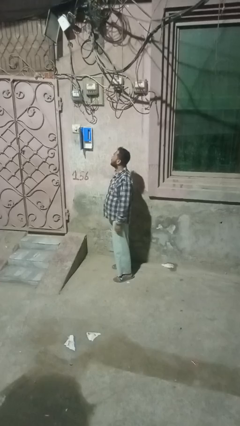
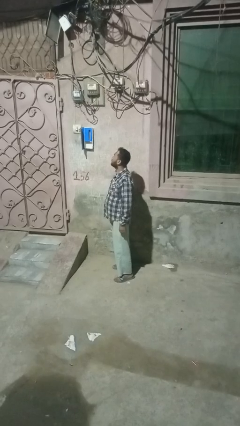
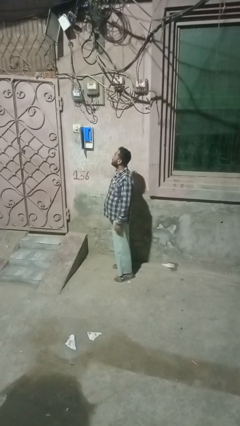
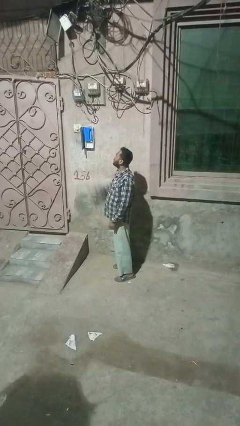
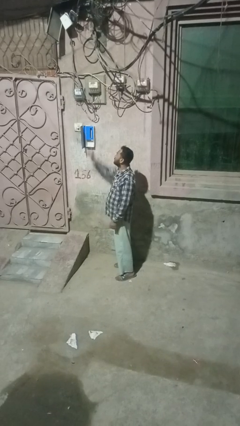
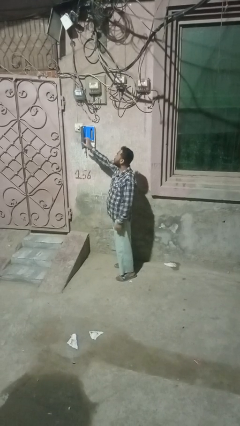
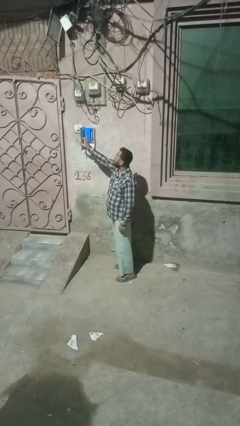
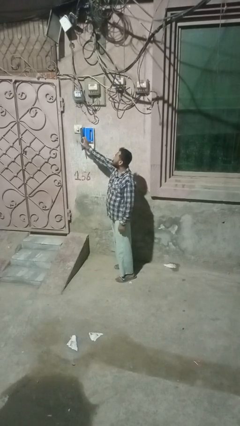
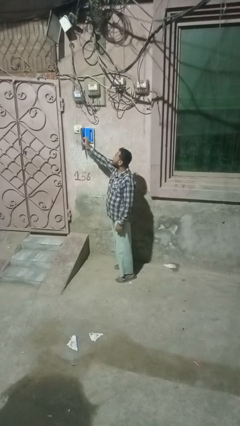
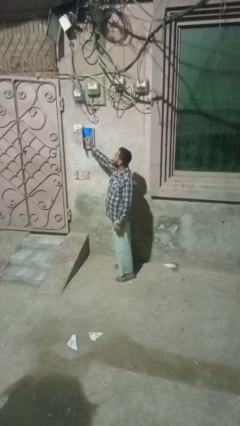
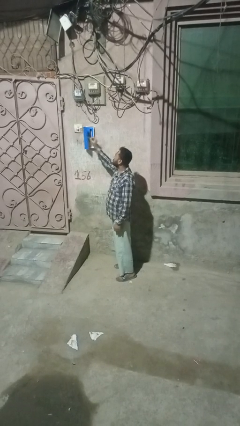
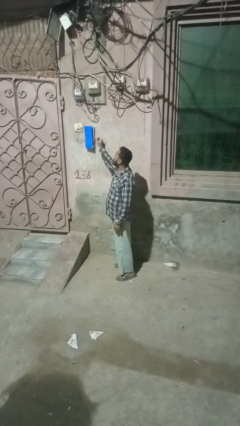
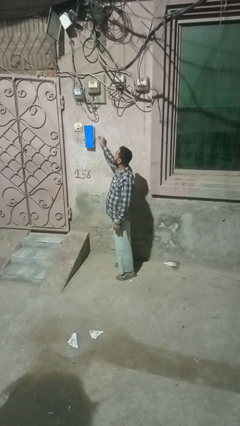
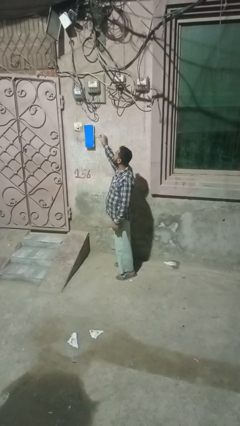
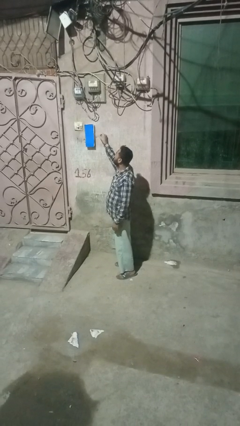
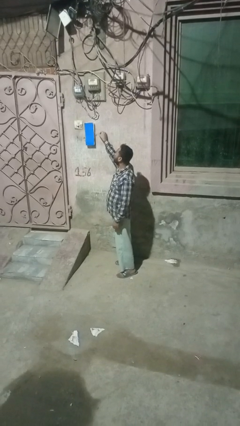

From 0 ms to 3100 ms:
person closes mailbox

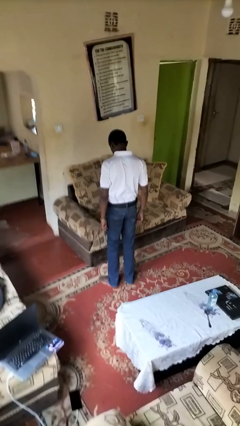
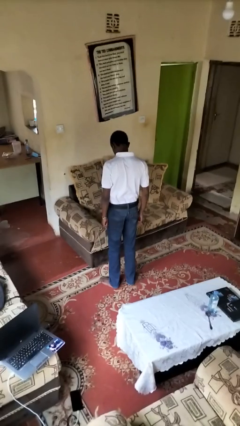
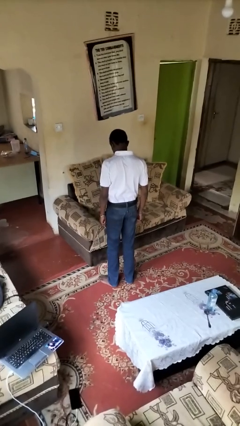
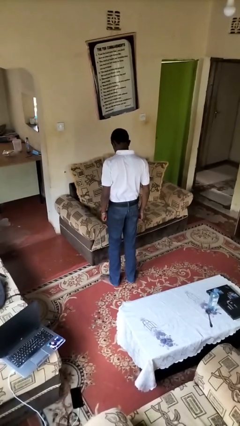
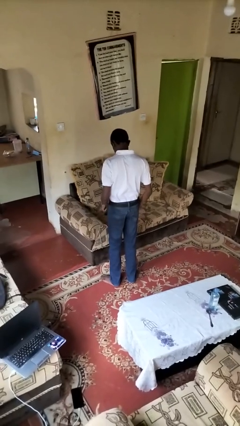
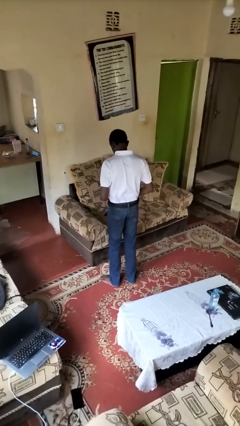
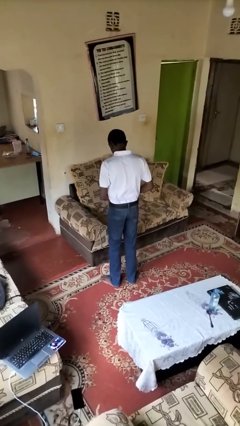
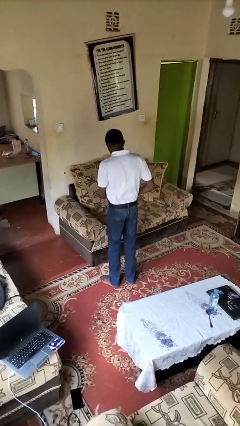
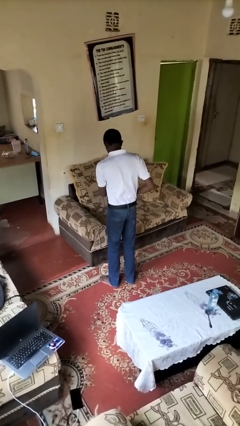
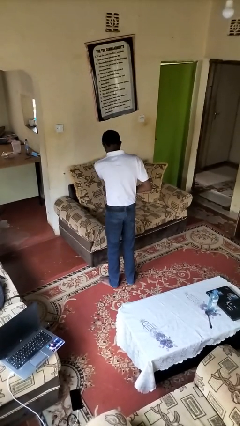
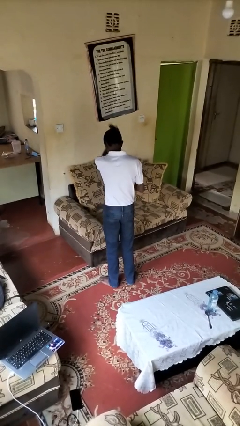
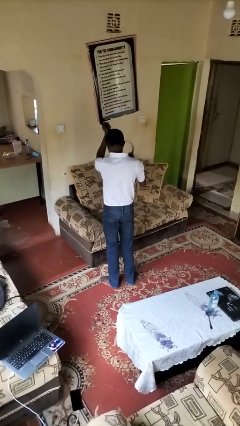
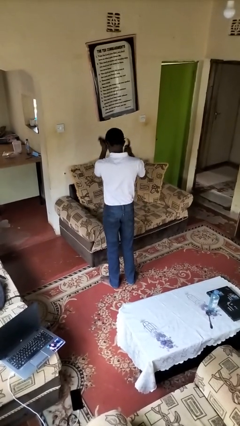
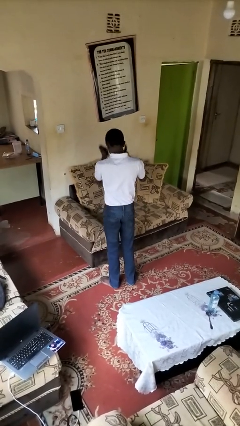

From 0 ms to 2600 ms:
person takes off belt

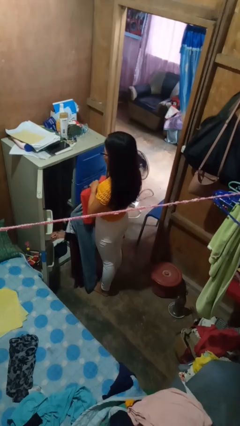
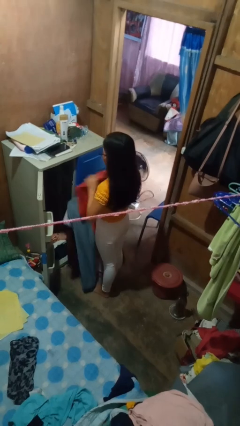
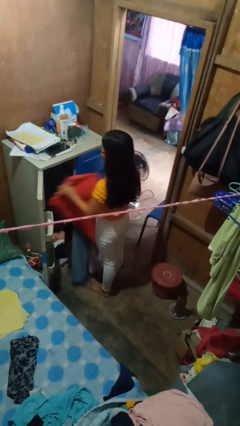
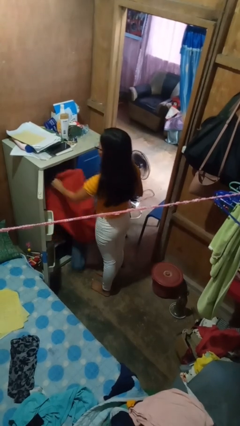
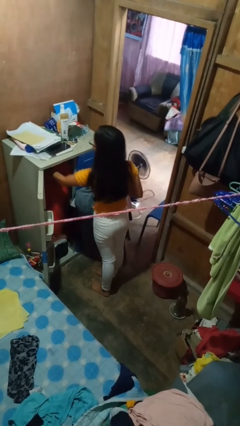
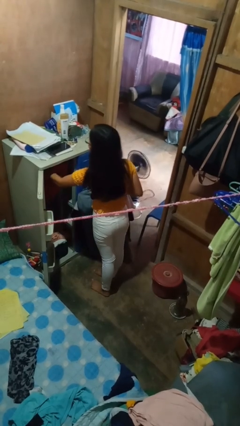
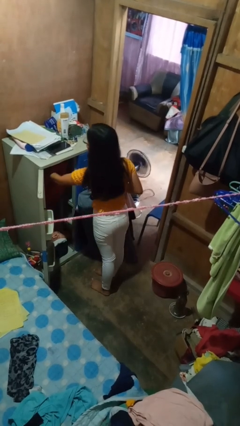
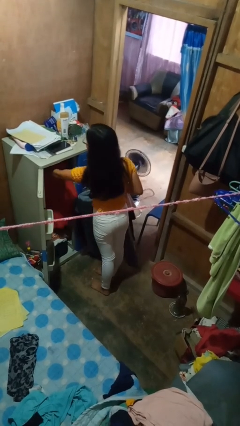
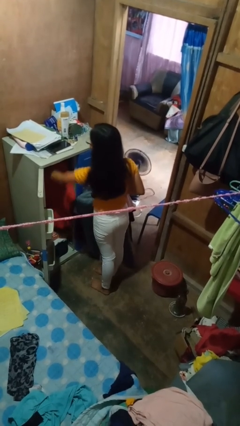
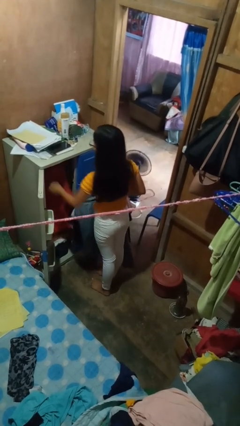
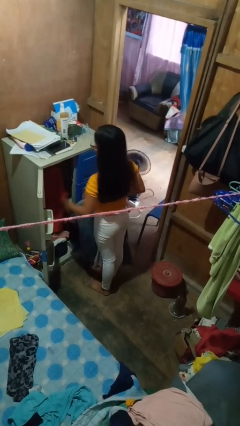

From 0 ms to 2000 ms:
person puts clothes into closet

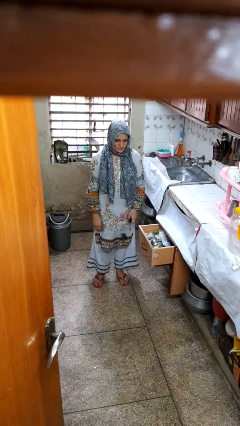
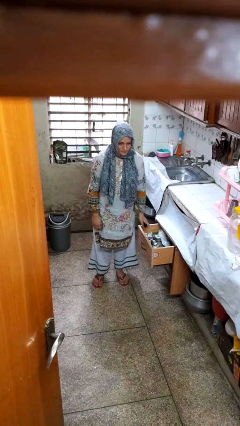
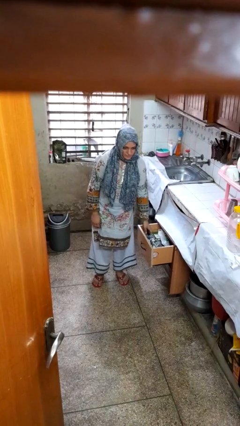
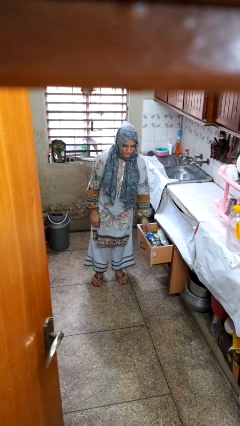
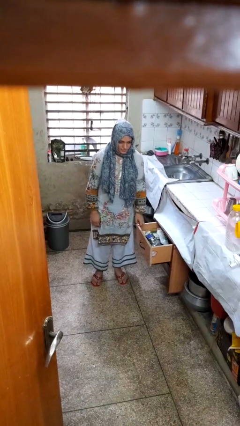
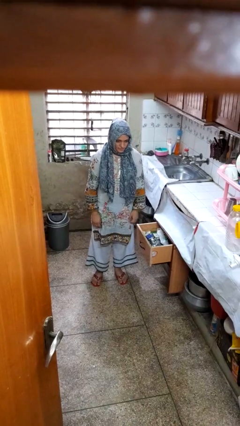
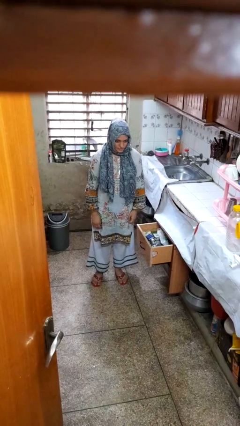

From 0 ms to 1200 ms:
person puts object into kitchen drawer

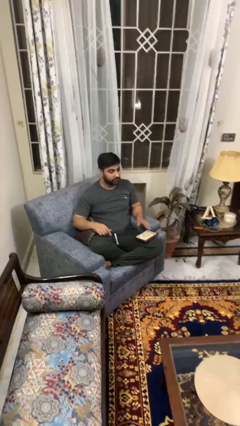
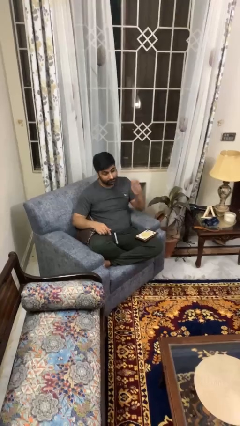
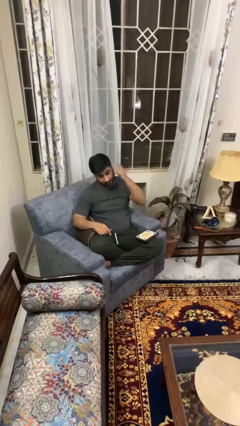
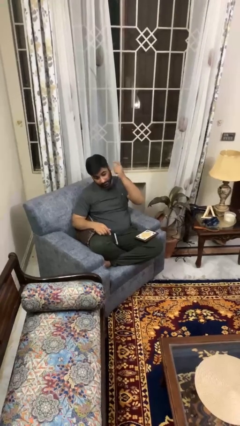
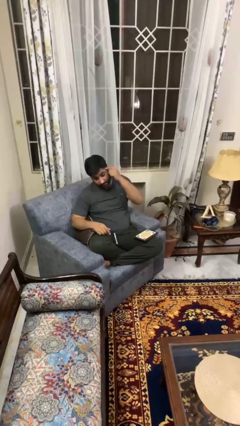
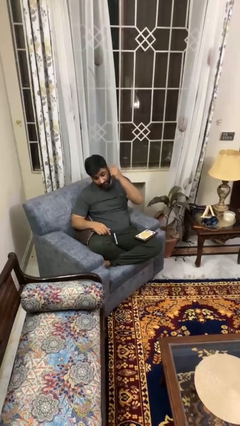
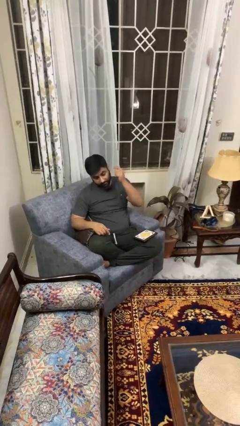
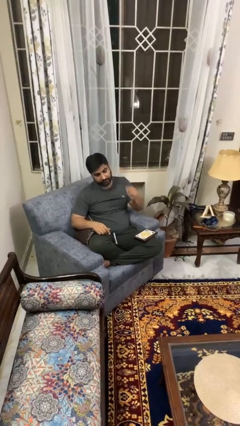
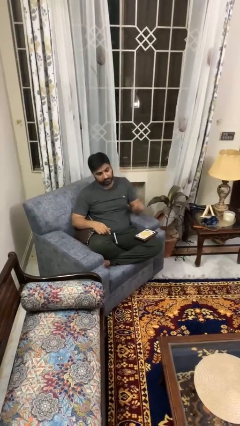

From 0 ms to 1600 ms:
person pats head

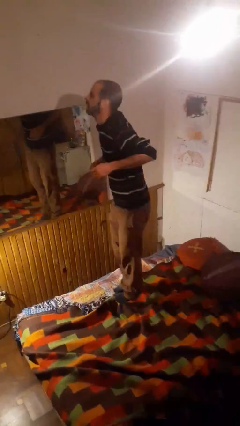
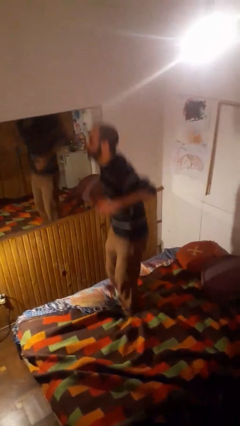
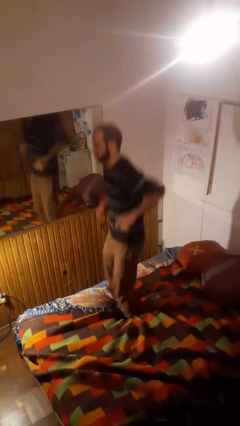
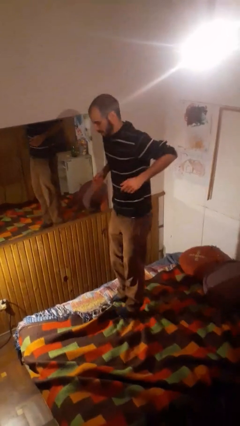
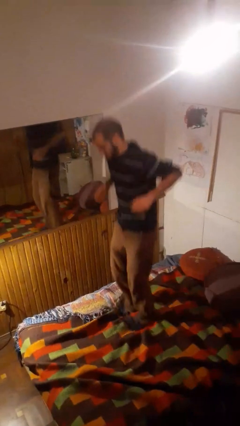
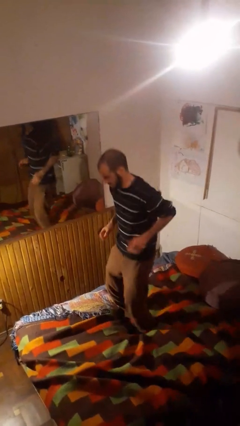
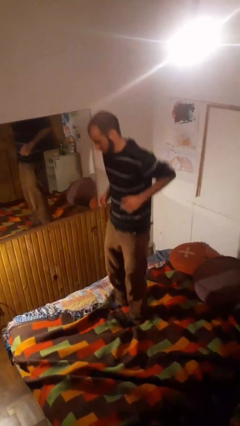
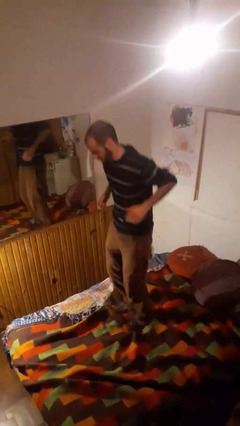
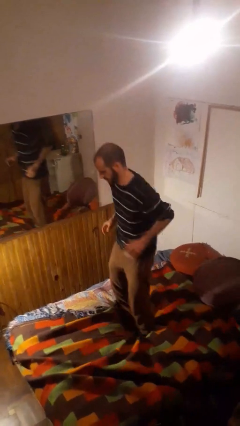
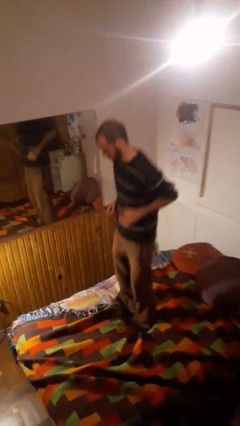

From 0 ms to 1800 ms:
person jumps on bed

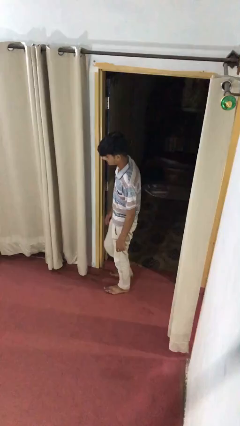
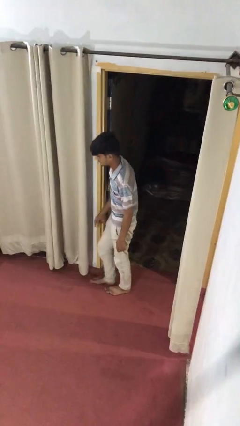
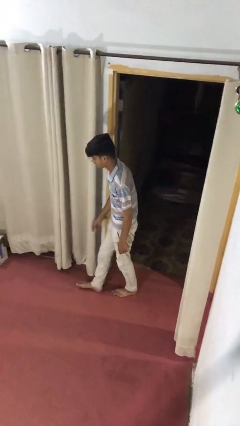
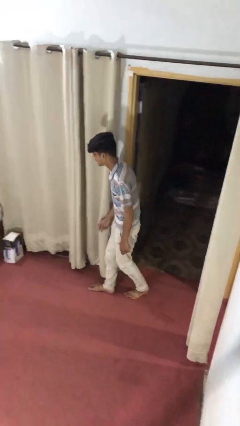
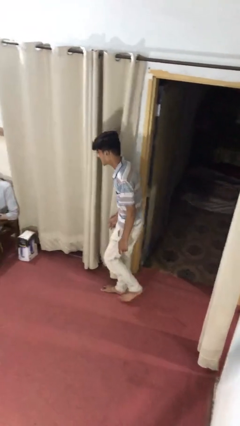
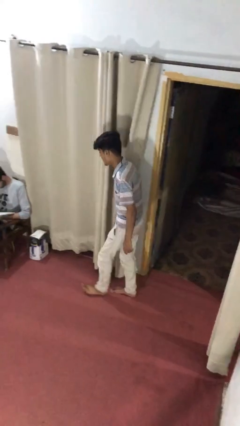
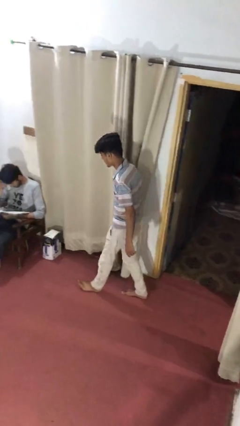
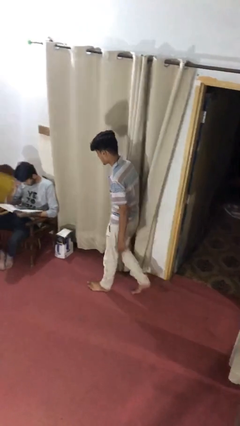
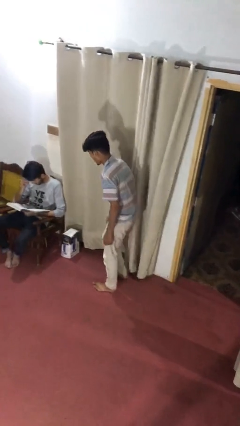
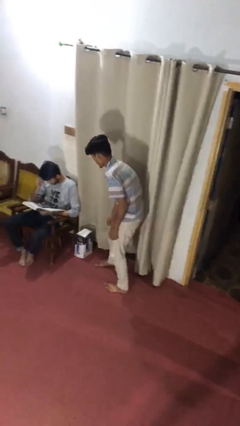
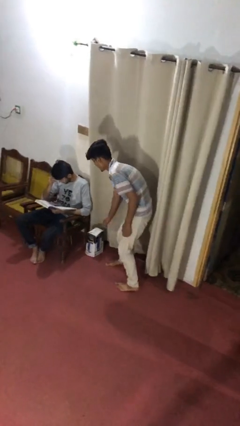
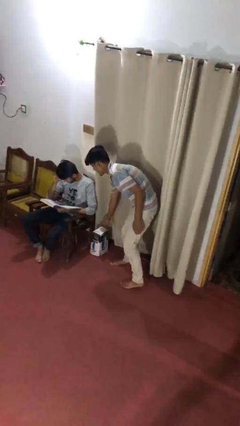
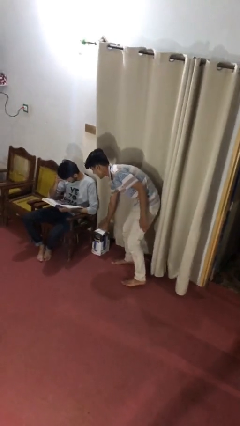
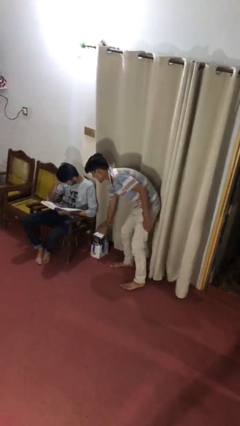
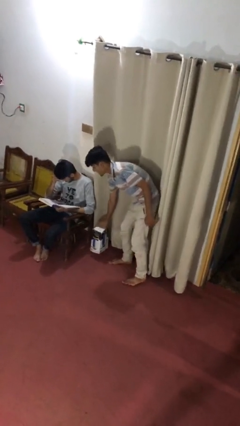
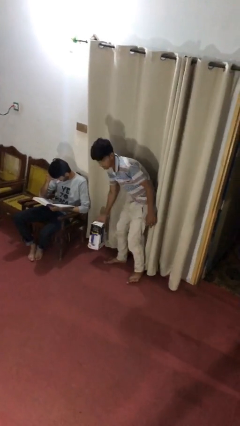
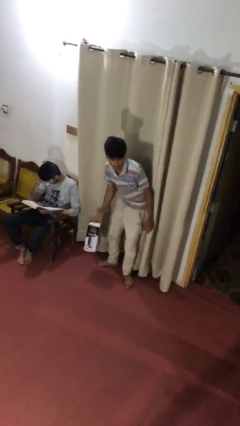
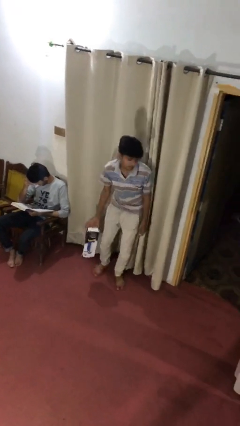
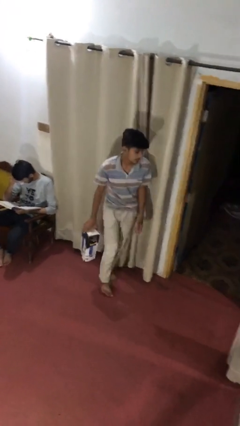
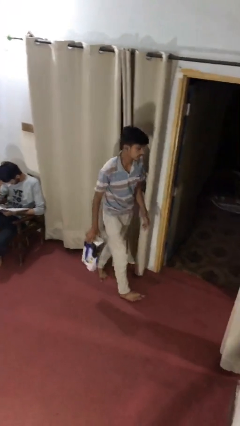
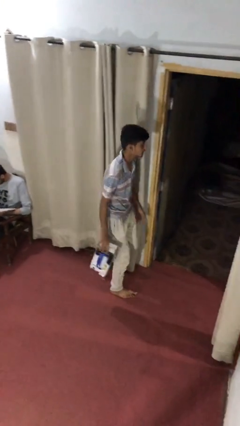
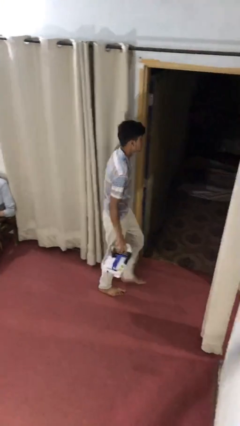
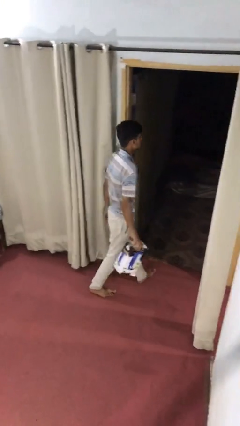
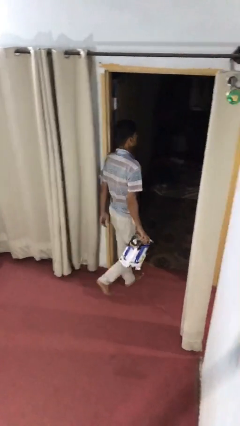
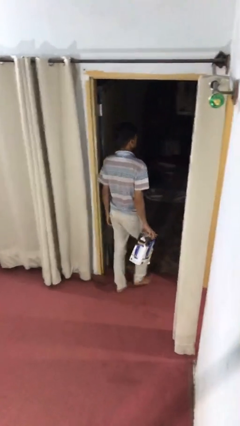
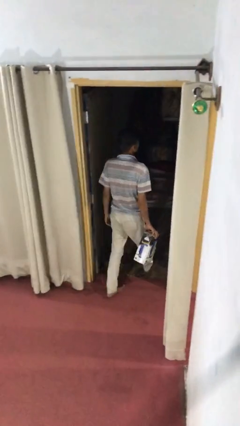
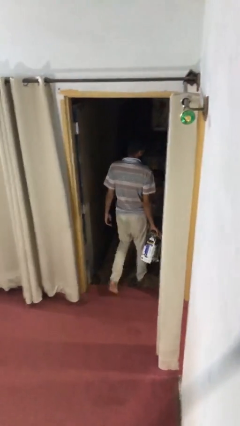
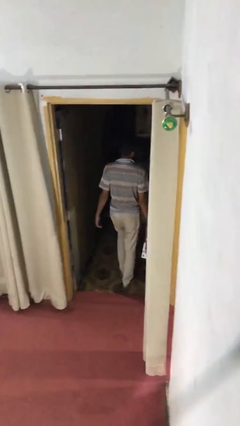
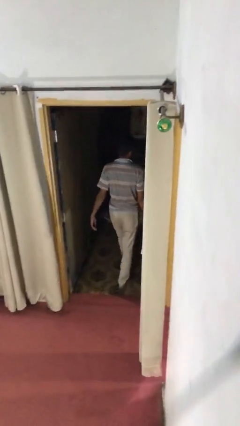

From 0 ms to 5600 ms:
person steals object from person
